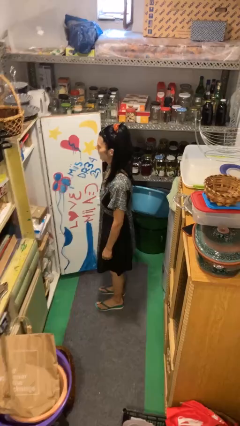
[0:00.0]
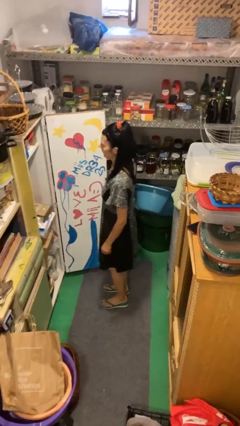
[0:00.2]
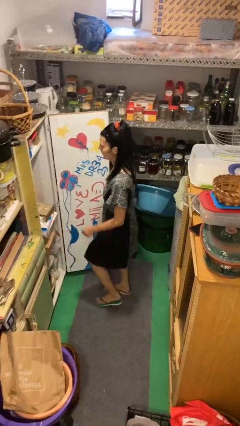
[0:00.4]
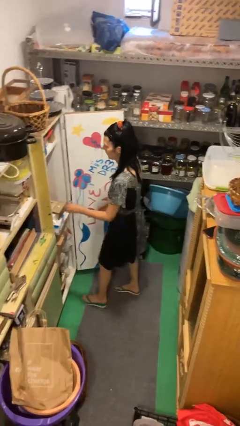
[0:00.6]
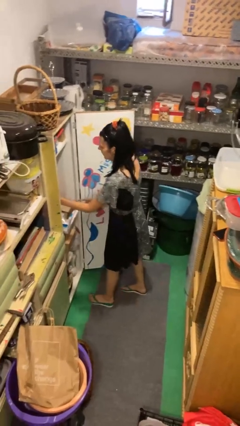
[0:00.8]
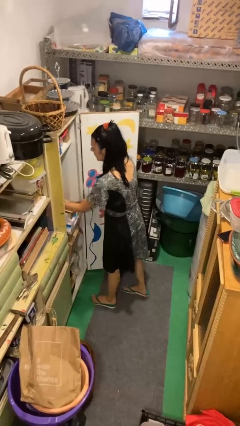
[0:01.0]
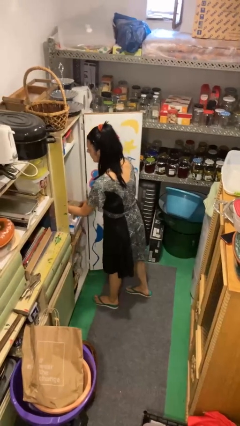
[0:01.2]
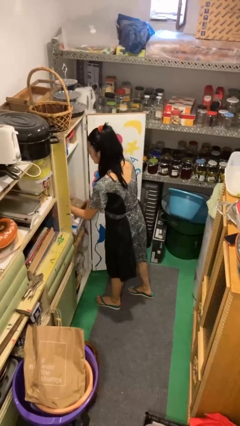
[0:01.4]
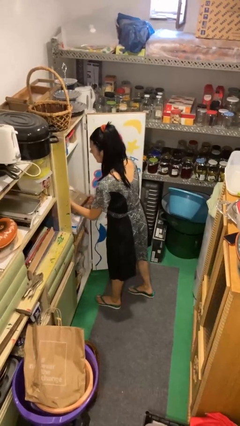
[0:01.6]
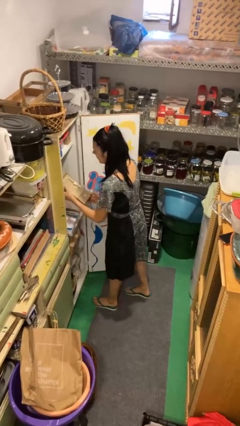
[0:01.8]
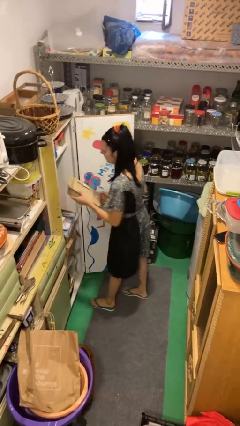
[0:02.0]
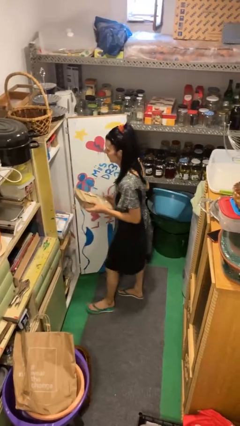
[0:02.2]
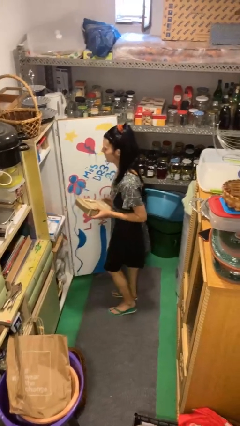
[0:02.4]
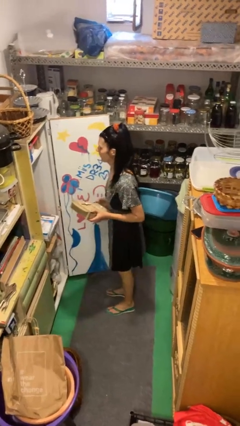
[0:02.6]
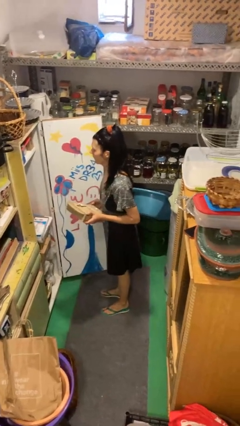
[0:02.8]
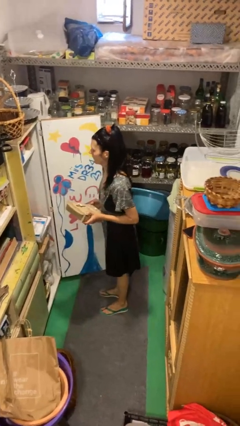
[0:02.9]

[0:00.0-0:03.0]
person picks up object from cabinet

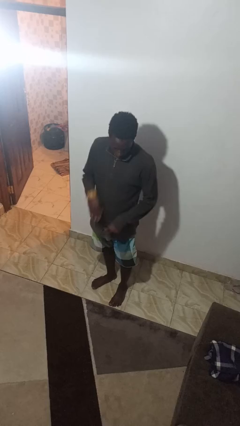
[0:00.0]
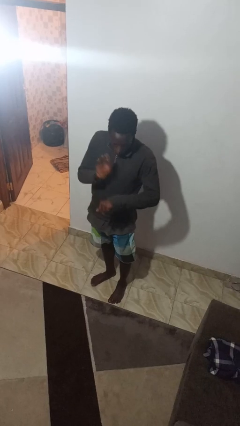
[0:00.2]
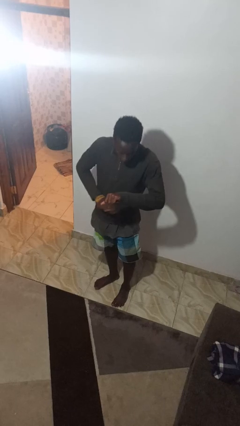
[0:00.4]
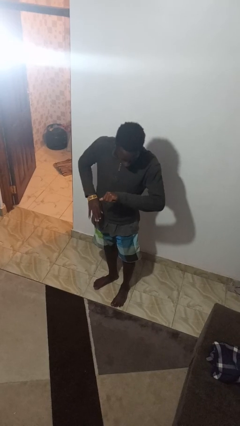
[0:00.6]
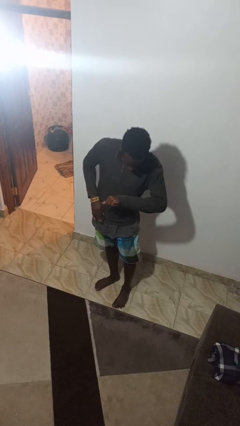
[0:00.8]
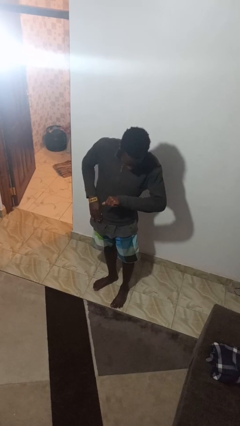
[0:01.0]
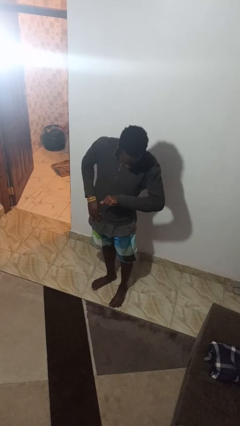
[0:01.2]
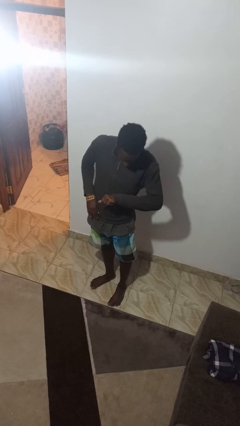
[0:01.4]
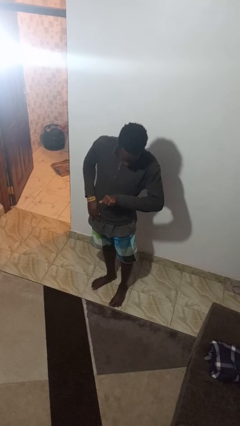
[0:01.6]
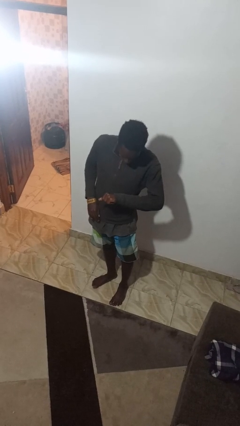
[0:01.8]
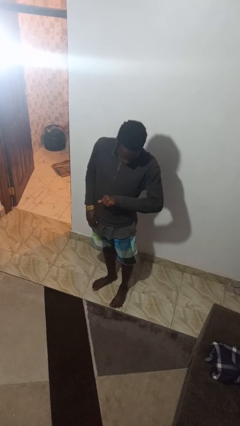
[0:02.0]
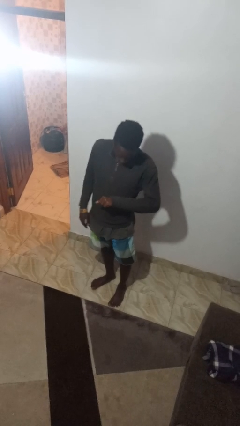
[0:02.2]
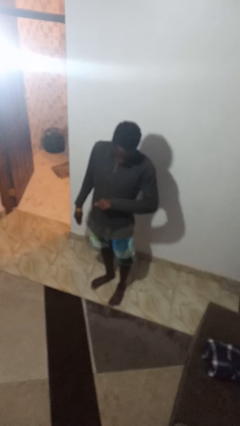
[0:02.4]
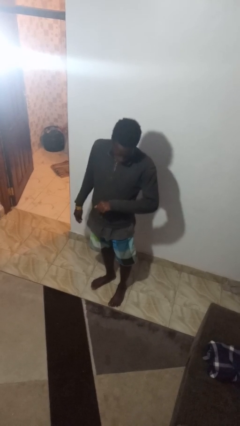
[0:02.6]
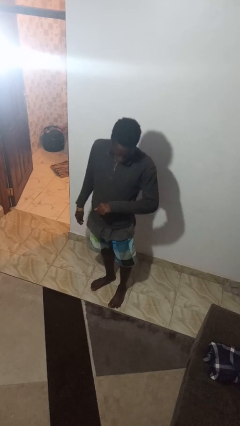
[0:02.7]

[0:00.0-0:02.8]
person swats bug

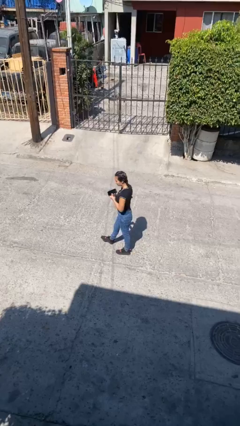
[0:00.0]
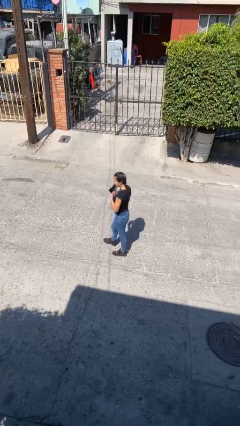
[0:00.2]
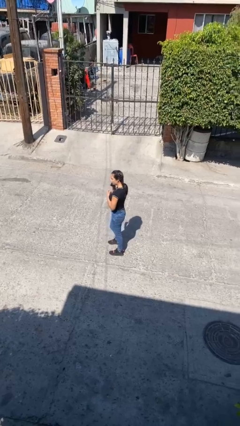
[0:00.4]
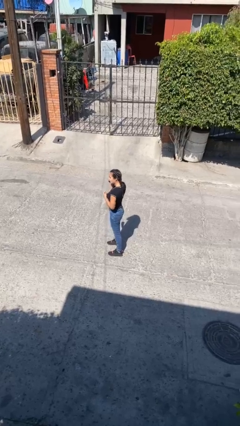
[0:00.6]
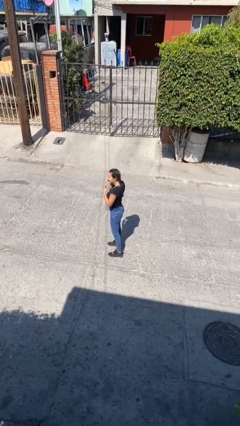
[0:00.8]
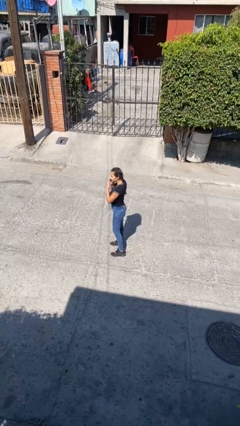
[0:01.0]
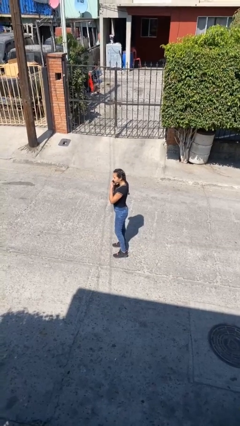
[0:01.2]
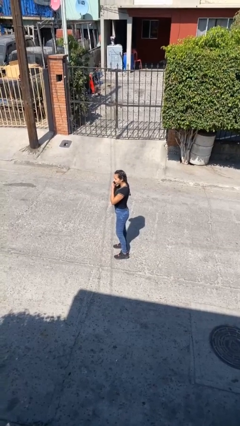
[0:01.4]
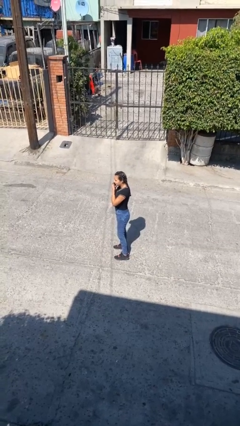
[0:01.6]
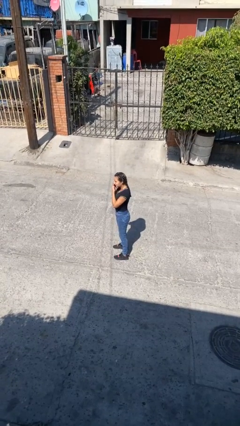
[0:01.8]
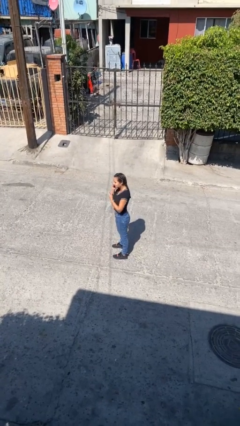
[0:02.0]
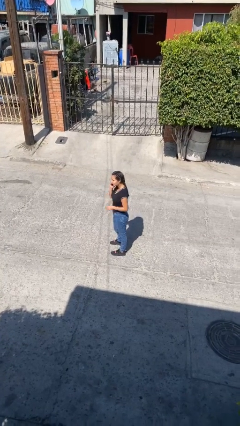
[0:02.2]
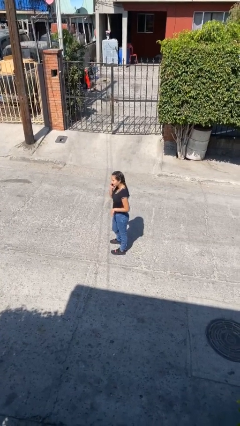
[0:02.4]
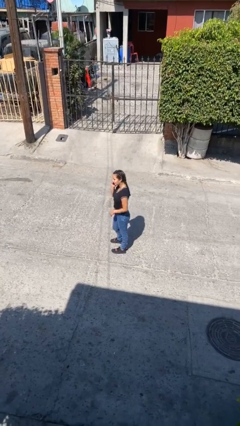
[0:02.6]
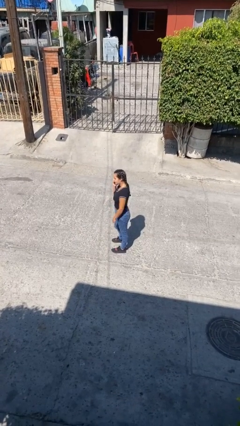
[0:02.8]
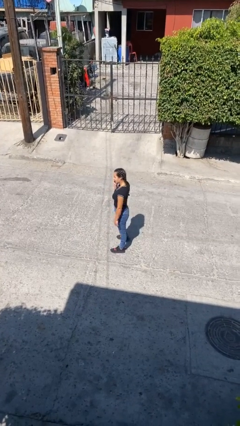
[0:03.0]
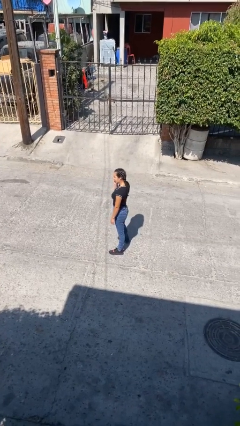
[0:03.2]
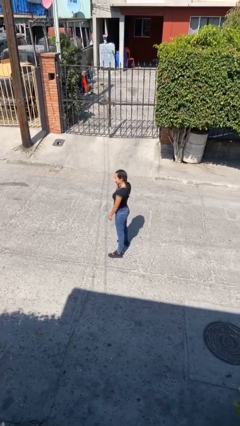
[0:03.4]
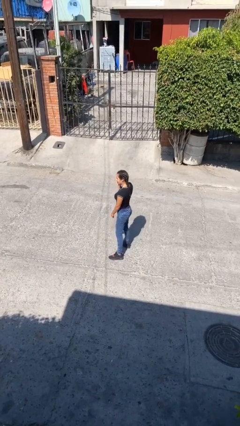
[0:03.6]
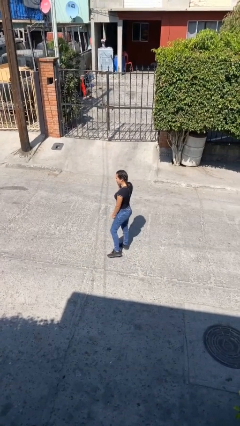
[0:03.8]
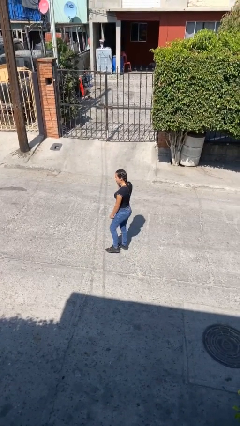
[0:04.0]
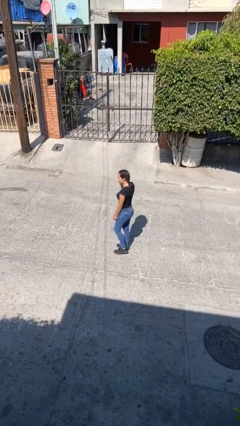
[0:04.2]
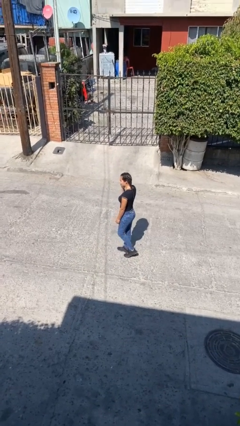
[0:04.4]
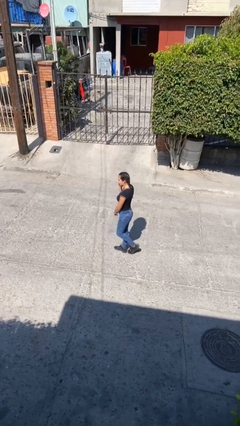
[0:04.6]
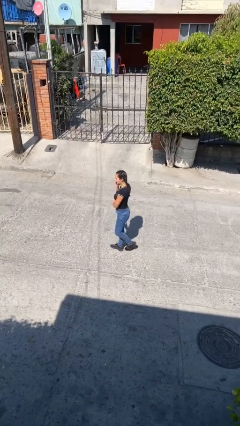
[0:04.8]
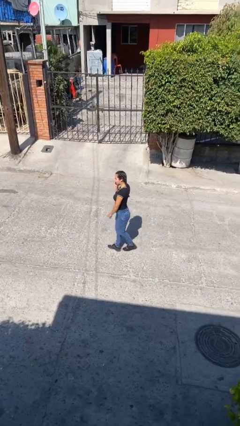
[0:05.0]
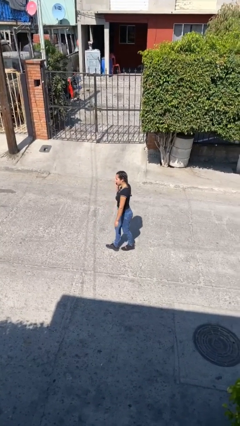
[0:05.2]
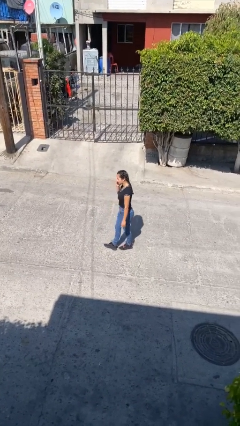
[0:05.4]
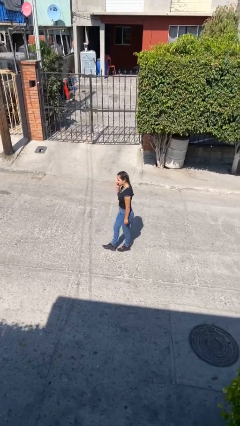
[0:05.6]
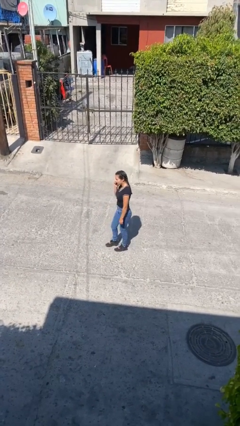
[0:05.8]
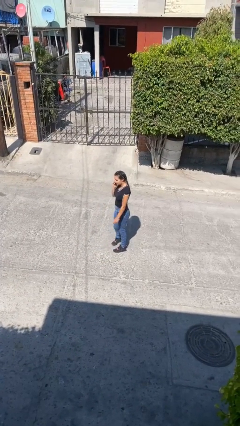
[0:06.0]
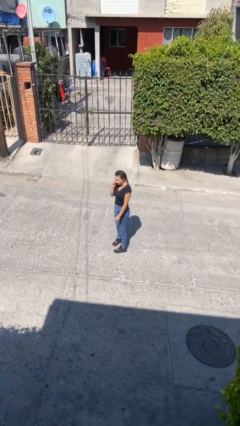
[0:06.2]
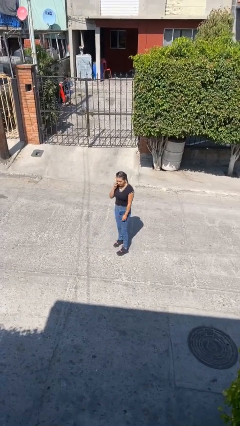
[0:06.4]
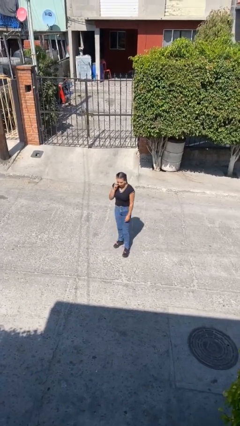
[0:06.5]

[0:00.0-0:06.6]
person talks on phone

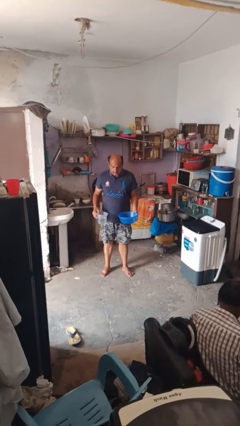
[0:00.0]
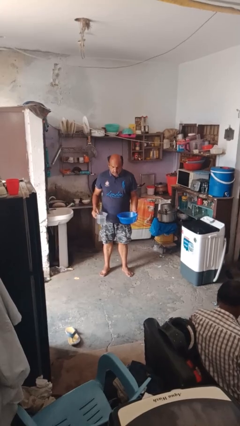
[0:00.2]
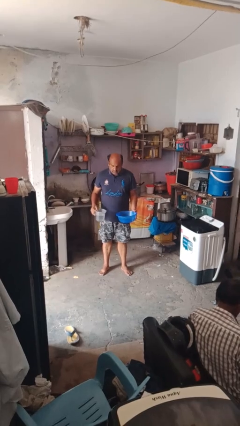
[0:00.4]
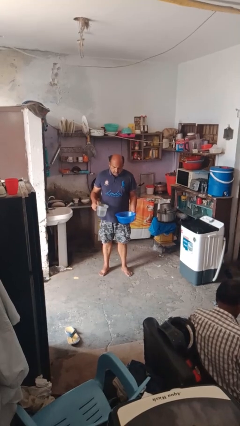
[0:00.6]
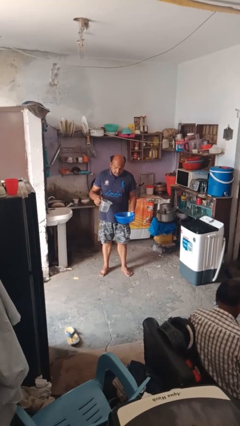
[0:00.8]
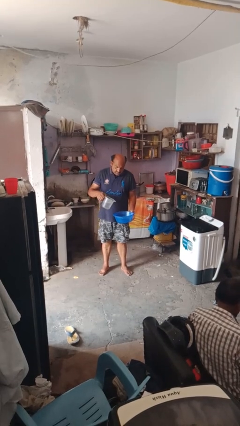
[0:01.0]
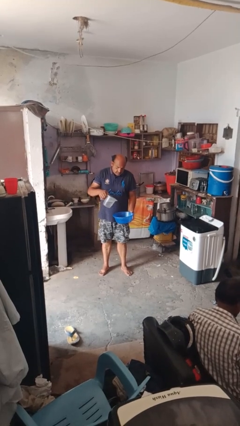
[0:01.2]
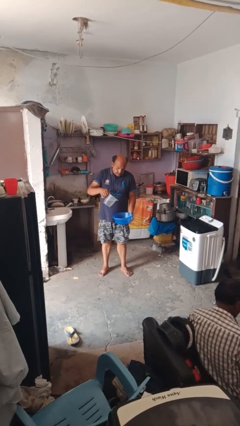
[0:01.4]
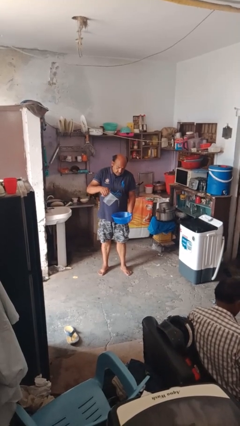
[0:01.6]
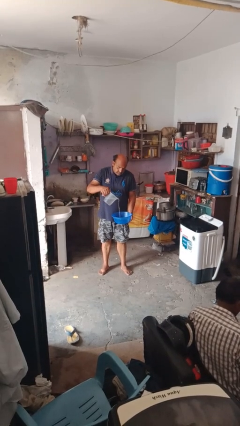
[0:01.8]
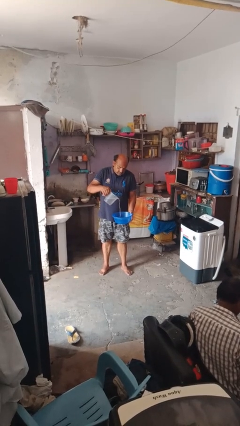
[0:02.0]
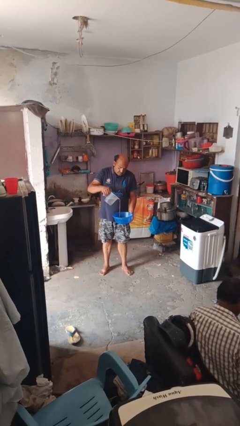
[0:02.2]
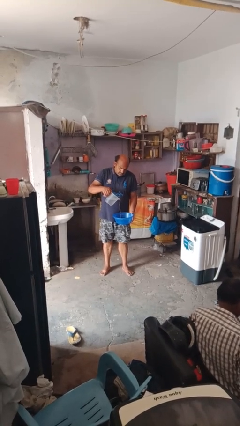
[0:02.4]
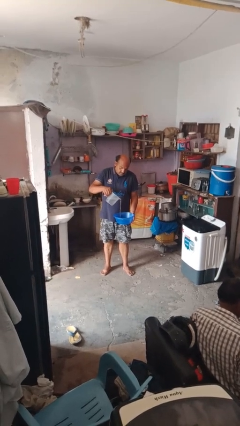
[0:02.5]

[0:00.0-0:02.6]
person pours into bowl

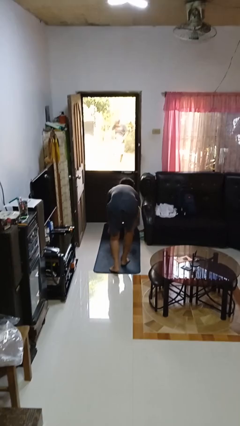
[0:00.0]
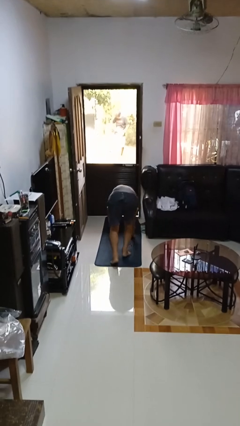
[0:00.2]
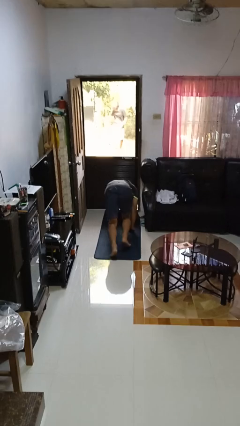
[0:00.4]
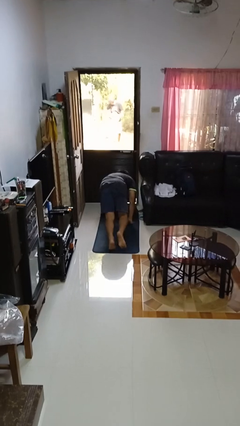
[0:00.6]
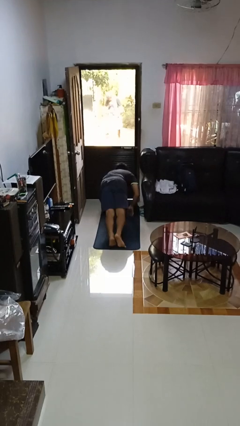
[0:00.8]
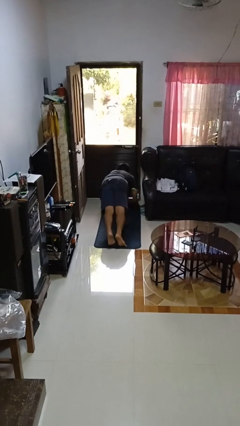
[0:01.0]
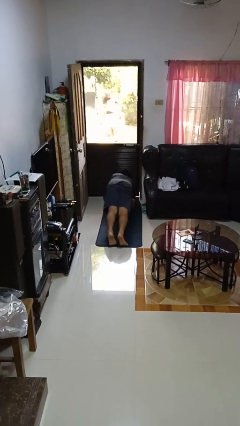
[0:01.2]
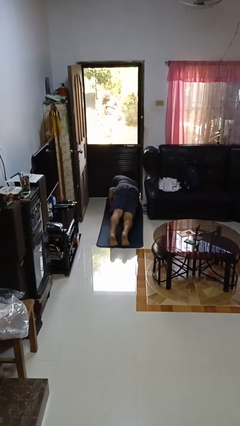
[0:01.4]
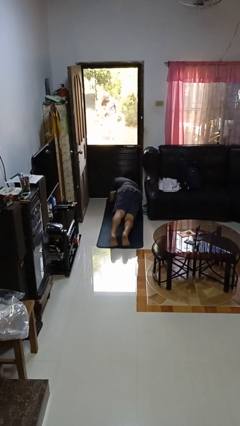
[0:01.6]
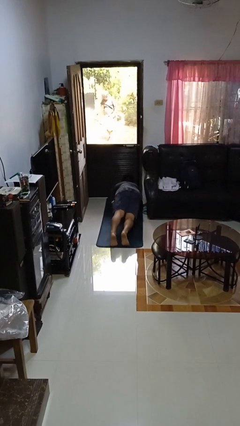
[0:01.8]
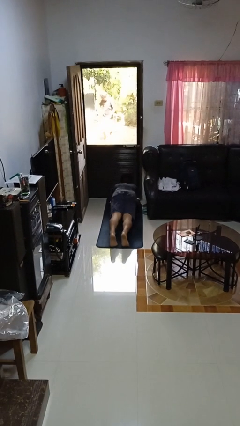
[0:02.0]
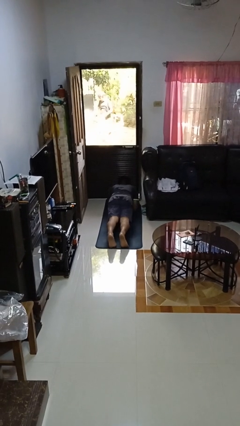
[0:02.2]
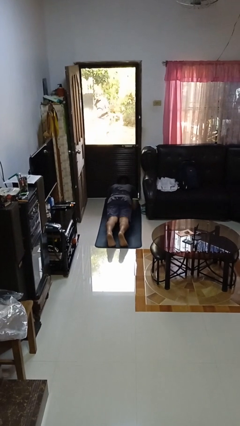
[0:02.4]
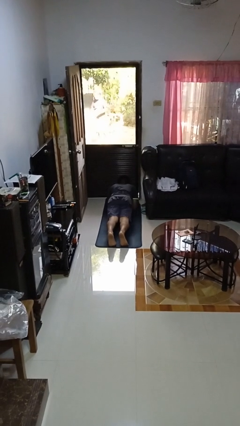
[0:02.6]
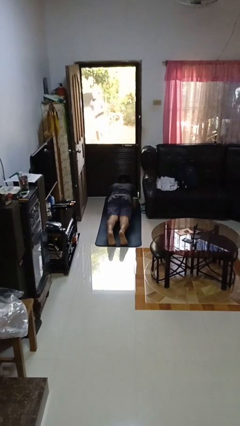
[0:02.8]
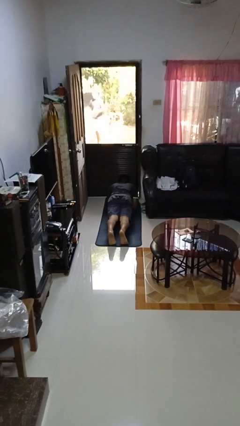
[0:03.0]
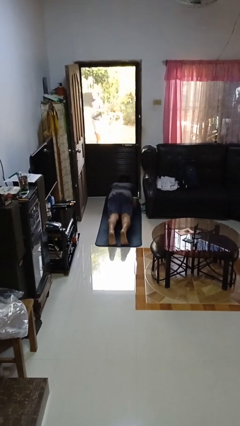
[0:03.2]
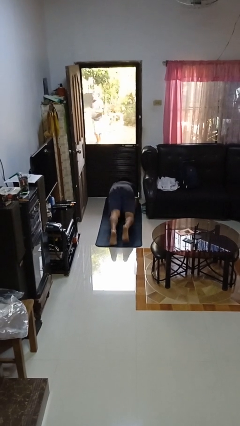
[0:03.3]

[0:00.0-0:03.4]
person exercises with plank
